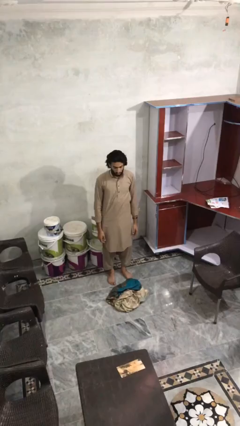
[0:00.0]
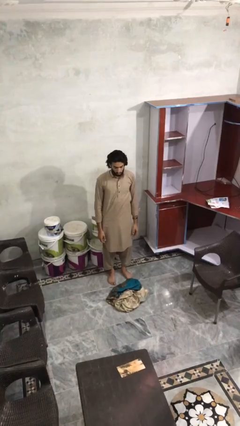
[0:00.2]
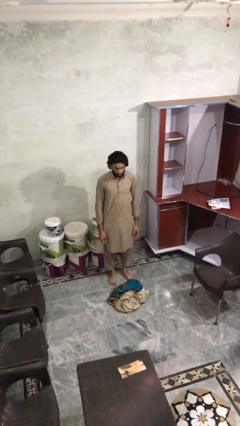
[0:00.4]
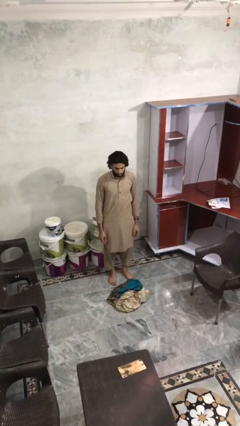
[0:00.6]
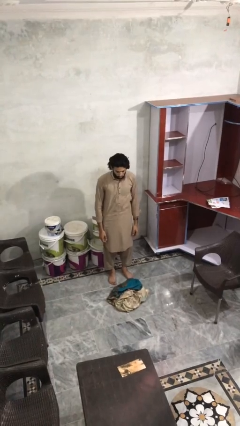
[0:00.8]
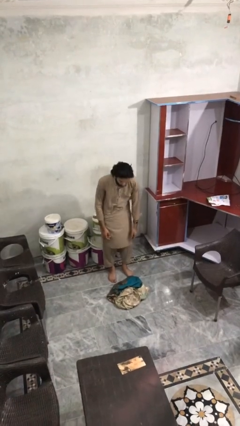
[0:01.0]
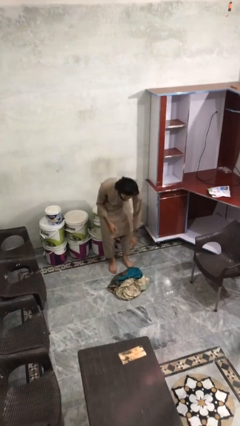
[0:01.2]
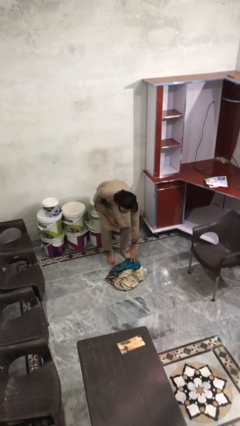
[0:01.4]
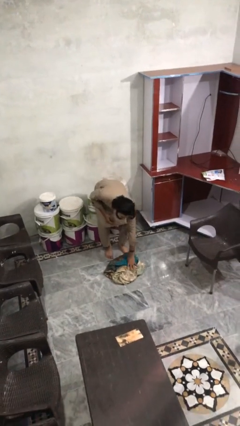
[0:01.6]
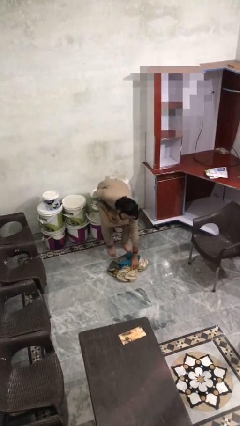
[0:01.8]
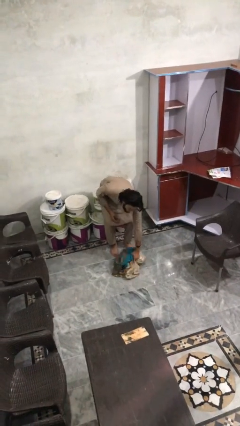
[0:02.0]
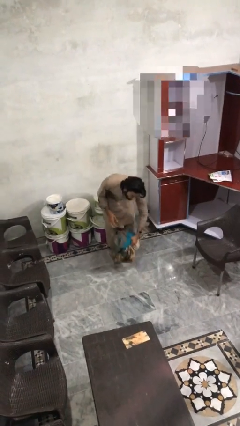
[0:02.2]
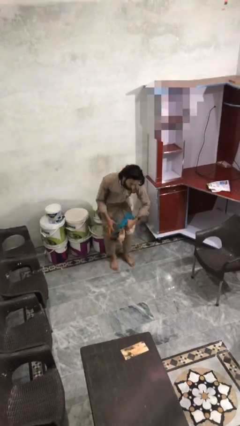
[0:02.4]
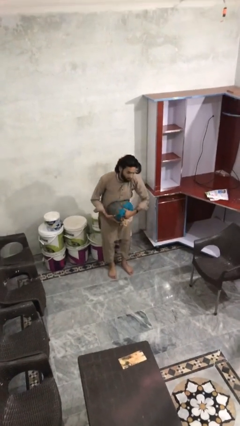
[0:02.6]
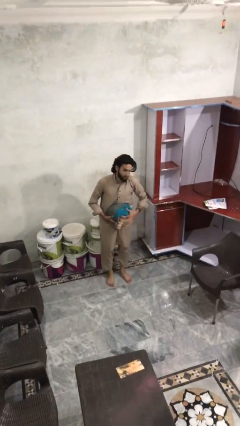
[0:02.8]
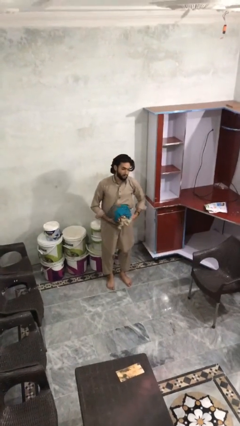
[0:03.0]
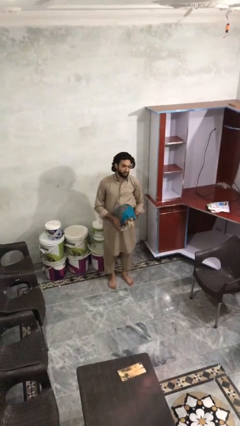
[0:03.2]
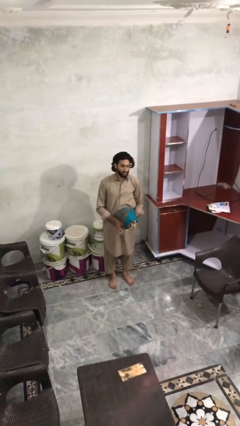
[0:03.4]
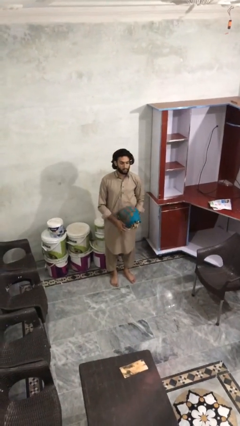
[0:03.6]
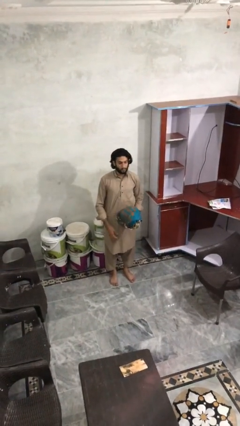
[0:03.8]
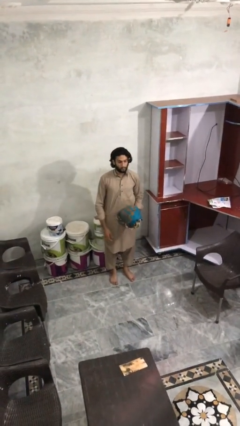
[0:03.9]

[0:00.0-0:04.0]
person picks up object from floor

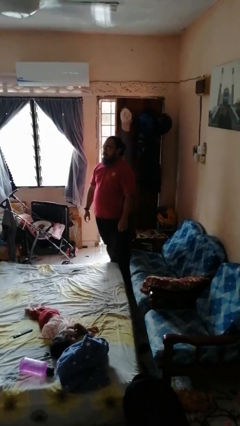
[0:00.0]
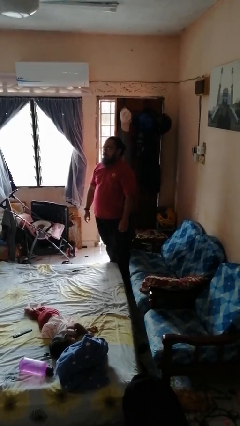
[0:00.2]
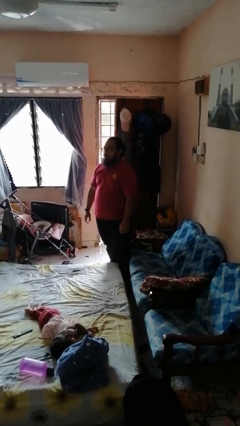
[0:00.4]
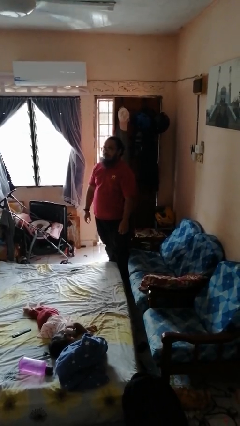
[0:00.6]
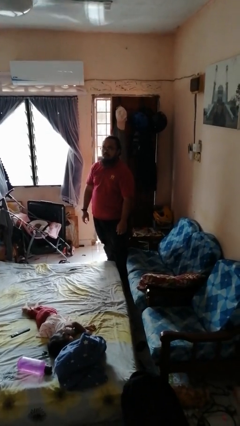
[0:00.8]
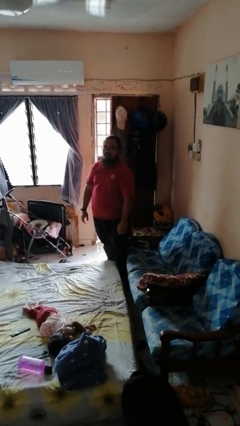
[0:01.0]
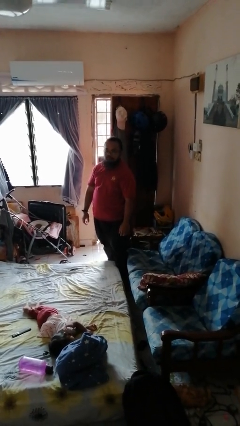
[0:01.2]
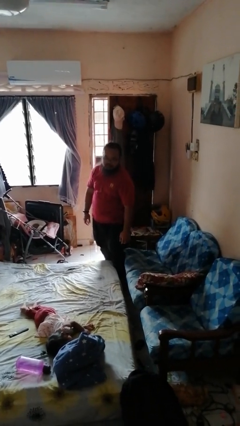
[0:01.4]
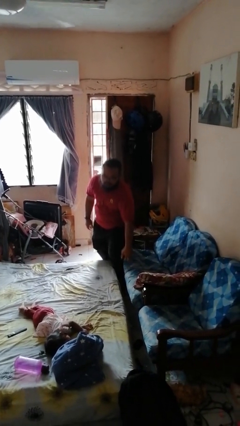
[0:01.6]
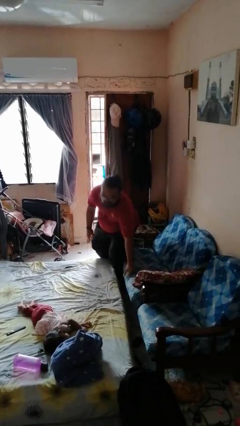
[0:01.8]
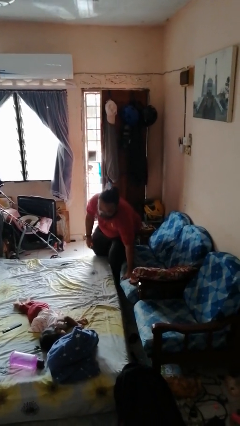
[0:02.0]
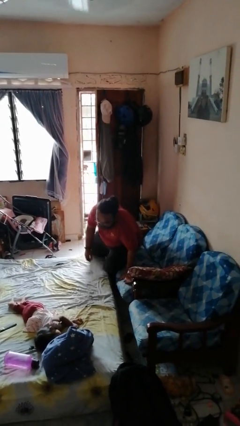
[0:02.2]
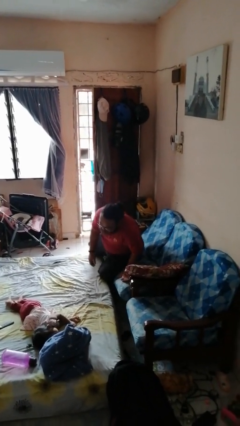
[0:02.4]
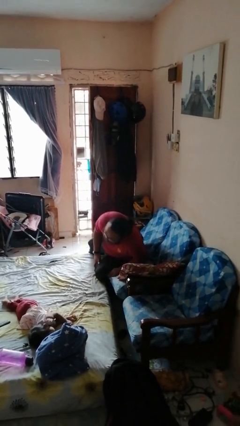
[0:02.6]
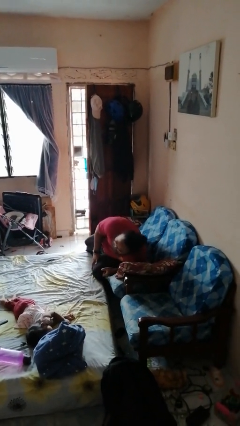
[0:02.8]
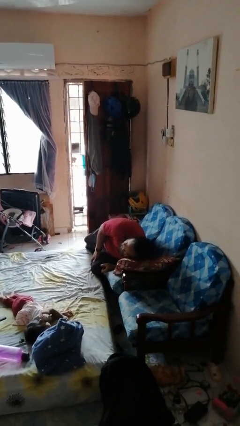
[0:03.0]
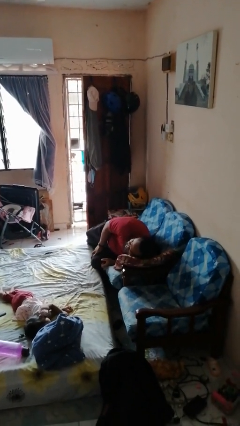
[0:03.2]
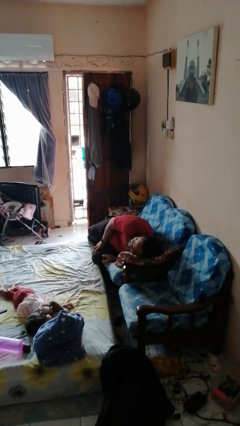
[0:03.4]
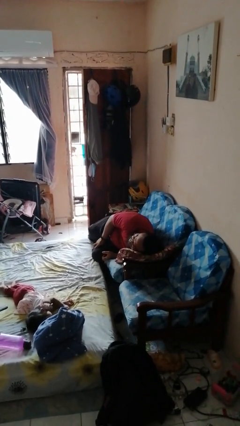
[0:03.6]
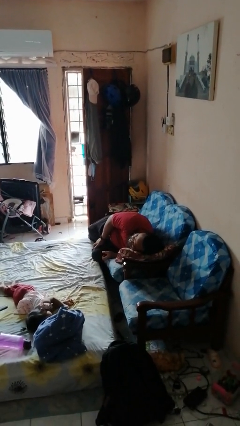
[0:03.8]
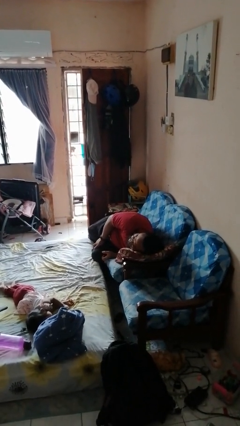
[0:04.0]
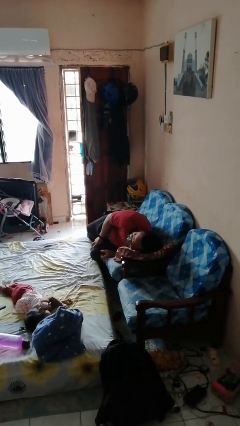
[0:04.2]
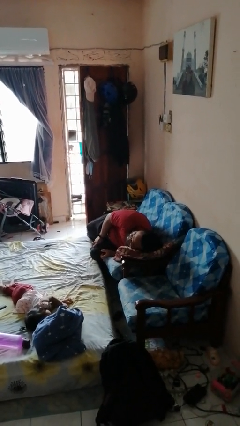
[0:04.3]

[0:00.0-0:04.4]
person lies down on bed

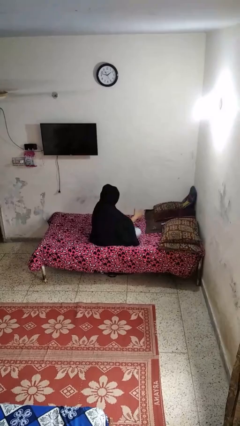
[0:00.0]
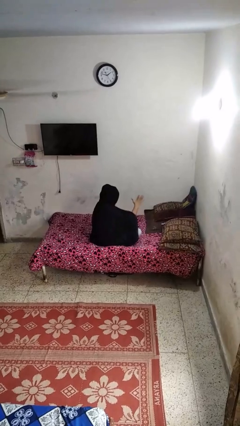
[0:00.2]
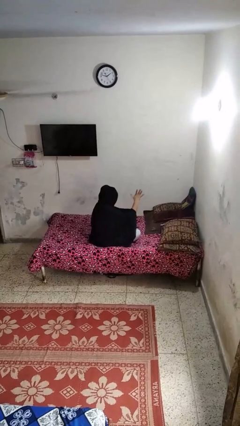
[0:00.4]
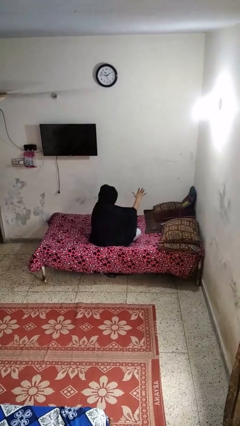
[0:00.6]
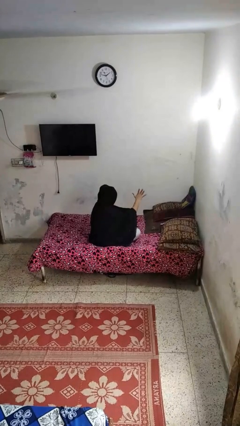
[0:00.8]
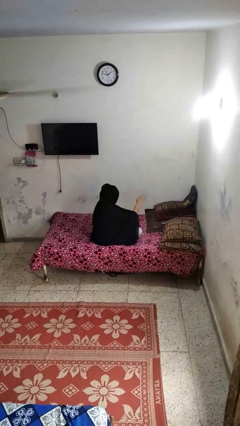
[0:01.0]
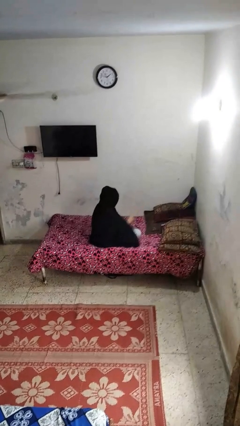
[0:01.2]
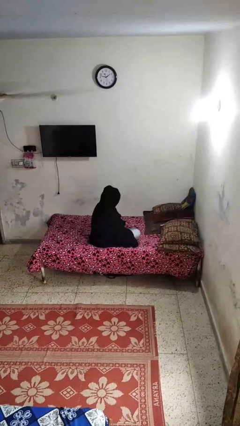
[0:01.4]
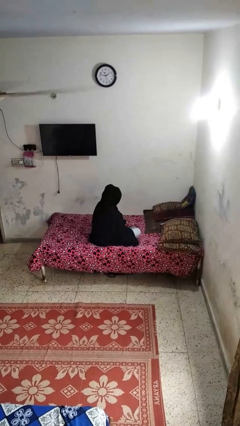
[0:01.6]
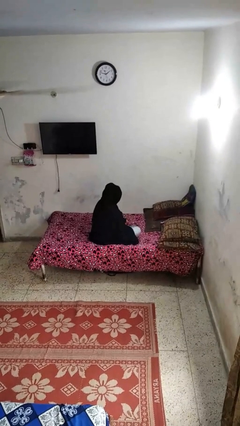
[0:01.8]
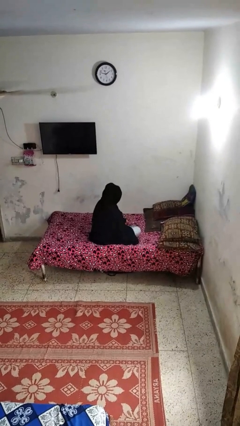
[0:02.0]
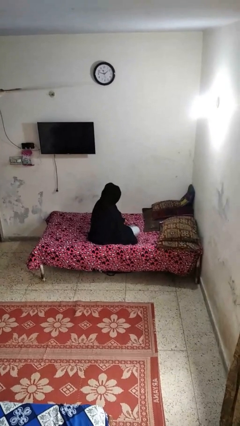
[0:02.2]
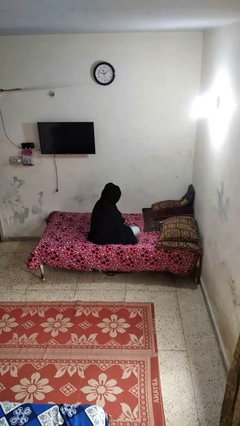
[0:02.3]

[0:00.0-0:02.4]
person gestures number five

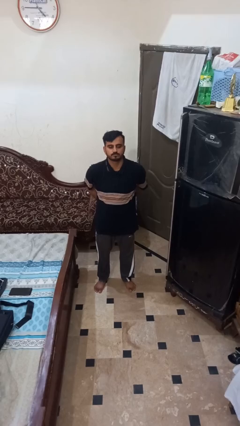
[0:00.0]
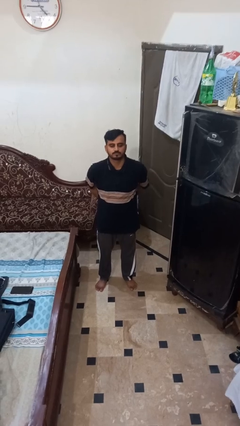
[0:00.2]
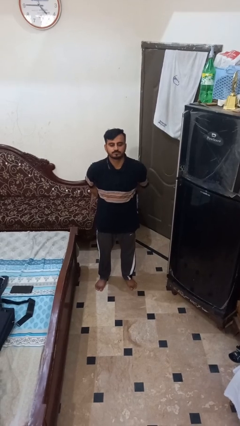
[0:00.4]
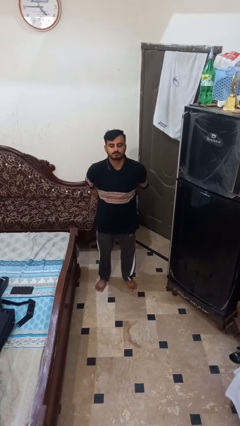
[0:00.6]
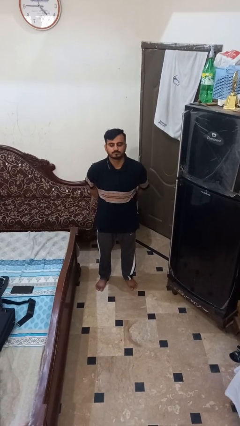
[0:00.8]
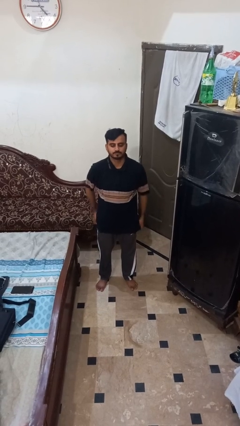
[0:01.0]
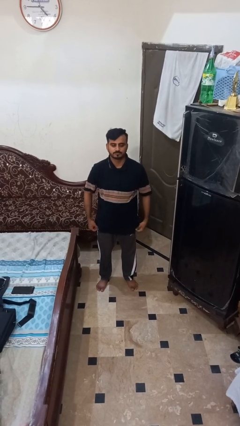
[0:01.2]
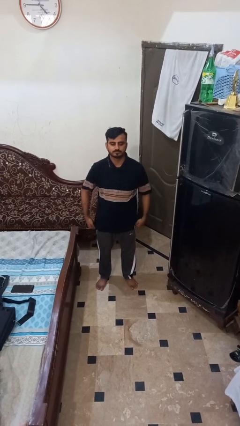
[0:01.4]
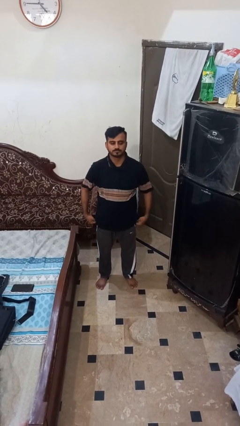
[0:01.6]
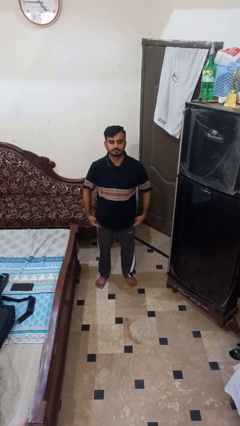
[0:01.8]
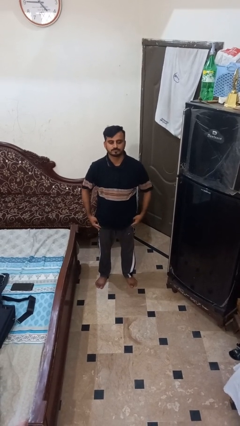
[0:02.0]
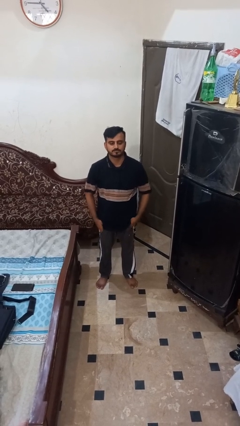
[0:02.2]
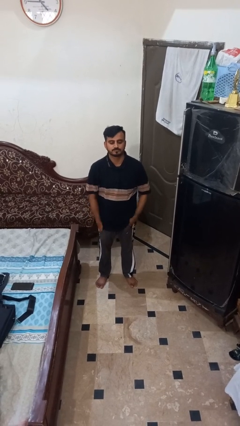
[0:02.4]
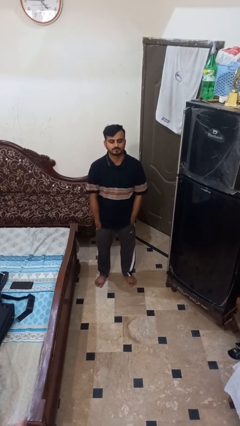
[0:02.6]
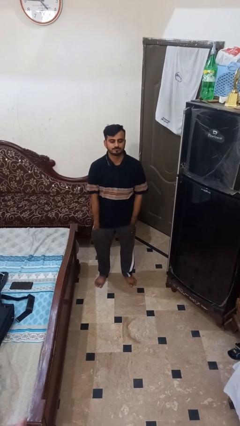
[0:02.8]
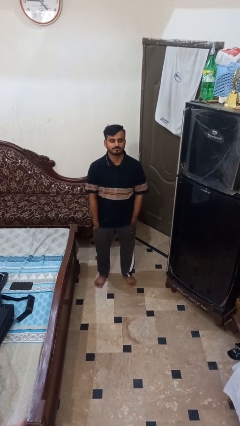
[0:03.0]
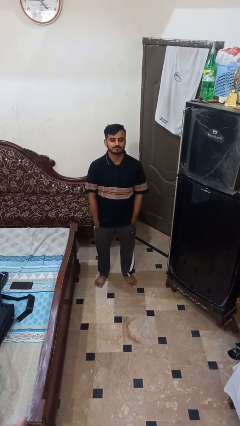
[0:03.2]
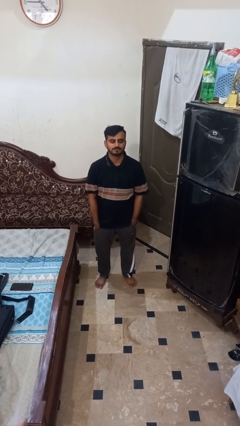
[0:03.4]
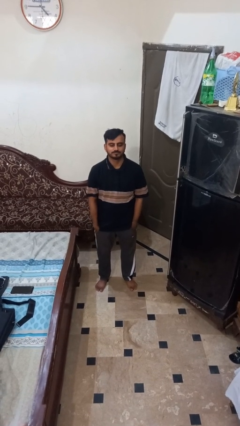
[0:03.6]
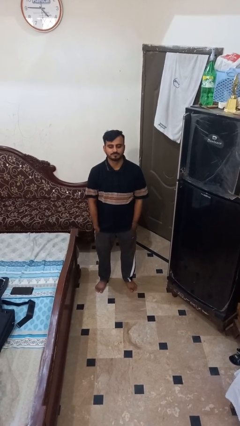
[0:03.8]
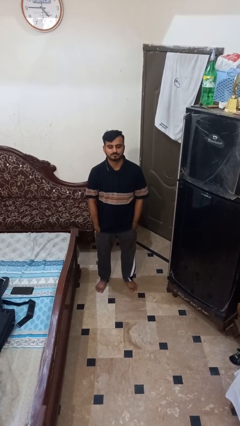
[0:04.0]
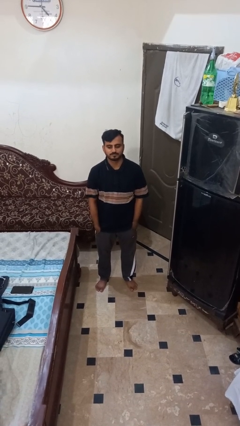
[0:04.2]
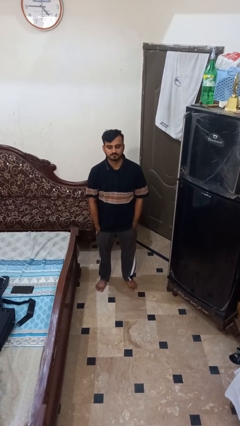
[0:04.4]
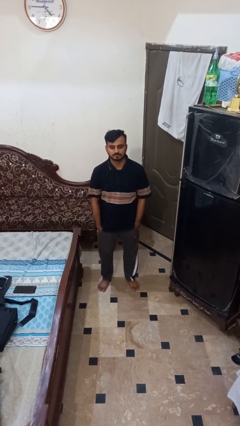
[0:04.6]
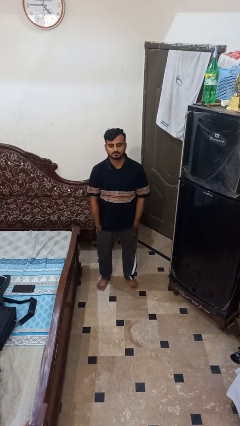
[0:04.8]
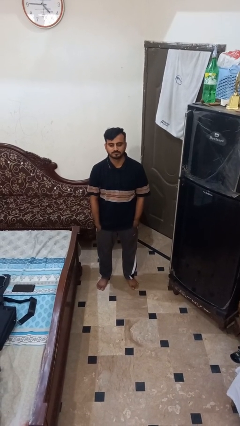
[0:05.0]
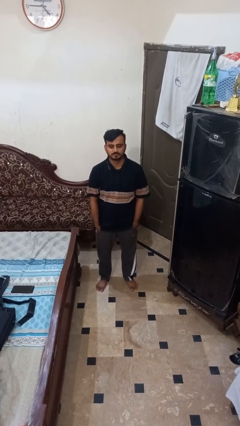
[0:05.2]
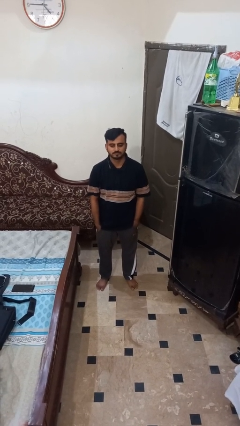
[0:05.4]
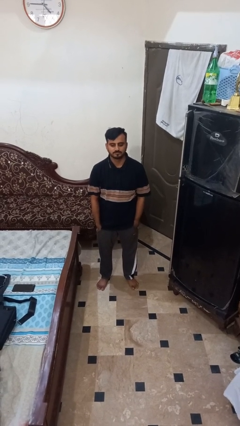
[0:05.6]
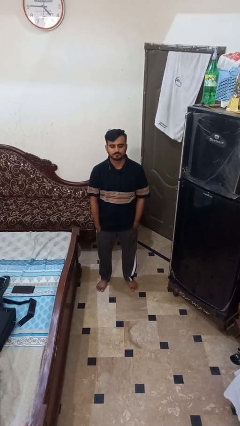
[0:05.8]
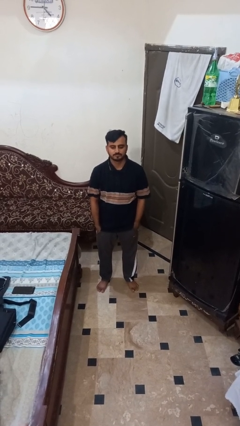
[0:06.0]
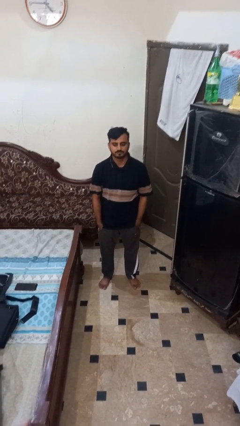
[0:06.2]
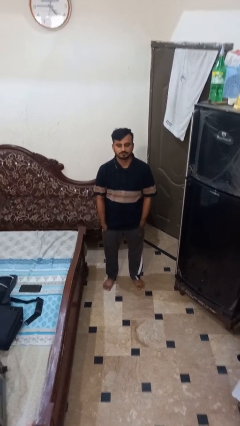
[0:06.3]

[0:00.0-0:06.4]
person puts hands in back pockets

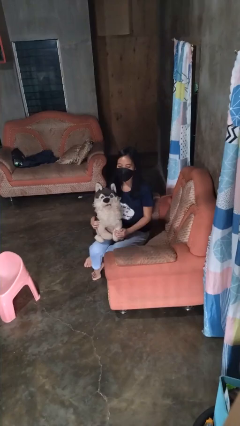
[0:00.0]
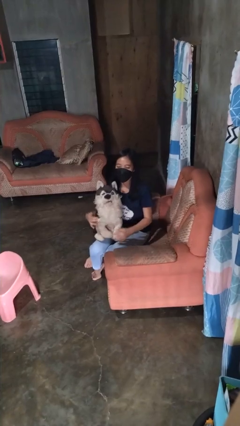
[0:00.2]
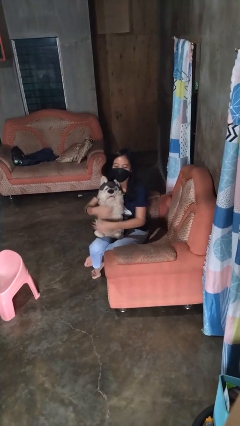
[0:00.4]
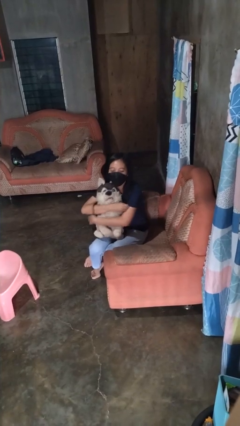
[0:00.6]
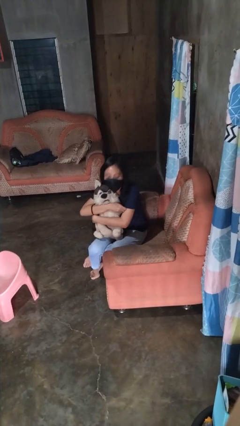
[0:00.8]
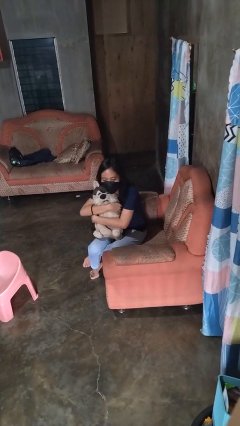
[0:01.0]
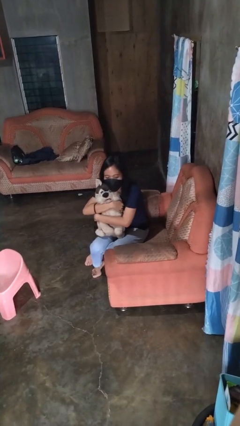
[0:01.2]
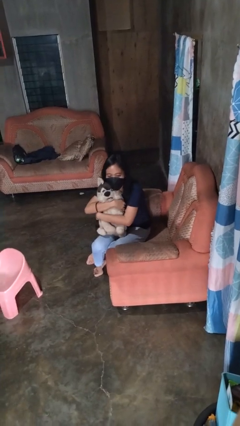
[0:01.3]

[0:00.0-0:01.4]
person hugs stuffed animal
